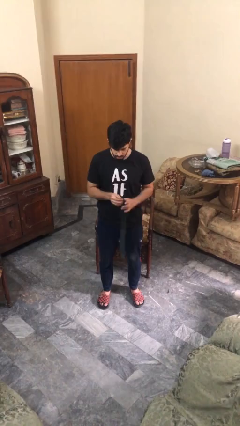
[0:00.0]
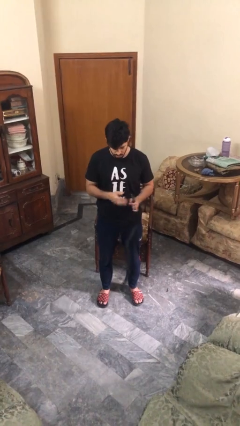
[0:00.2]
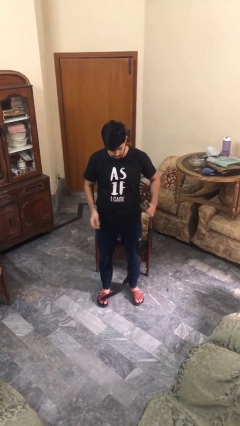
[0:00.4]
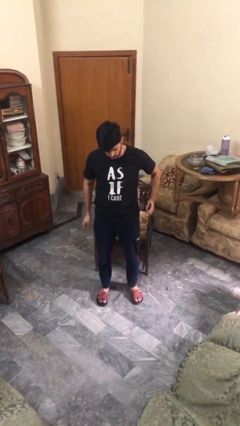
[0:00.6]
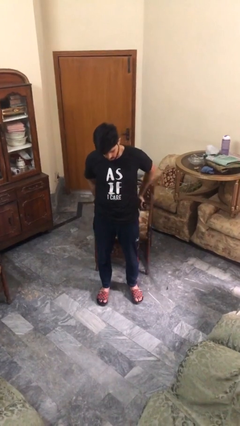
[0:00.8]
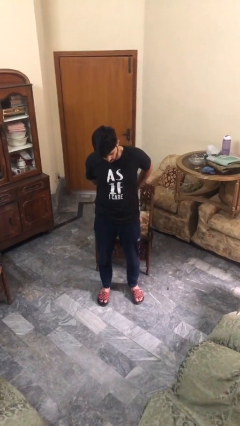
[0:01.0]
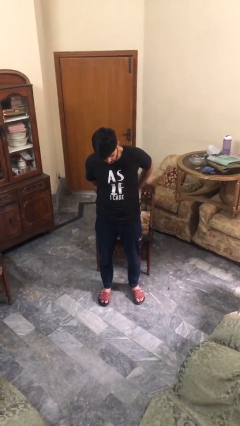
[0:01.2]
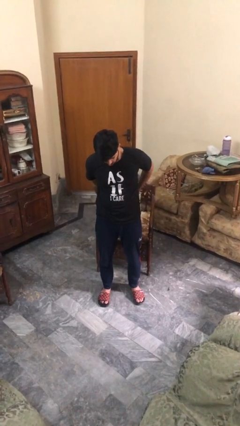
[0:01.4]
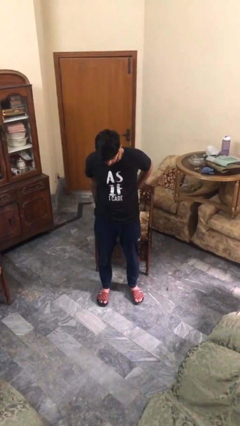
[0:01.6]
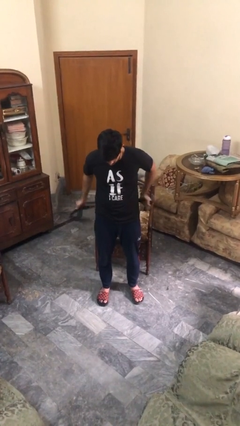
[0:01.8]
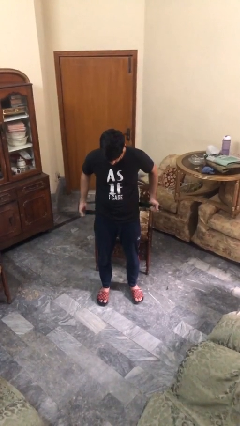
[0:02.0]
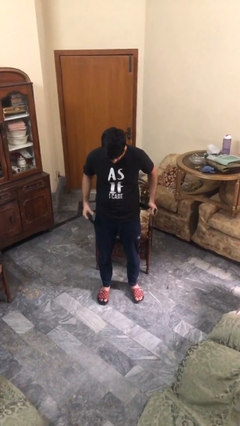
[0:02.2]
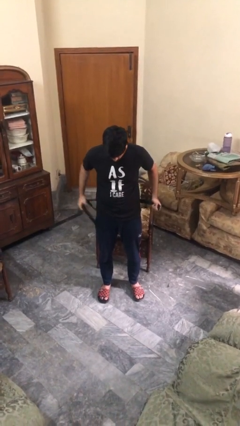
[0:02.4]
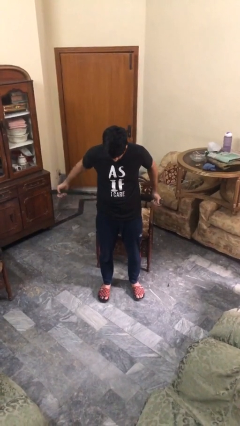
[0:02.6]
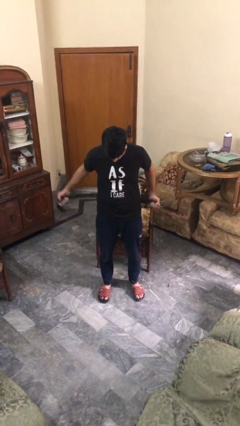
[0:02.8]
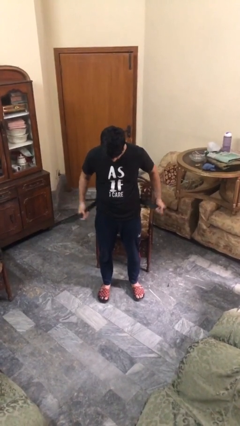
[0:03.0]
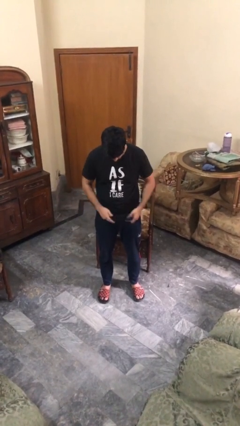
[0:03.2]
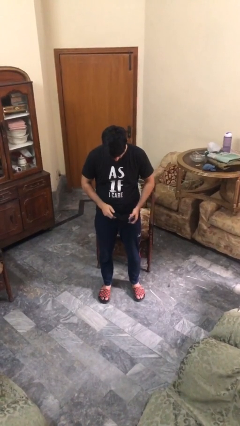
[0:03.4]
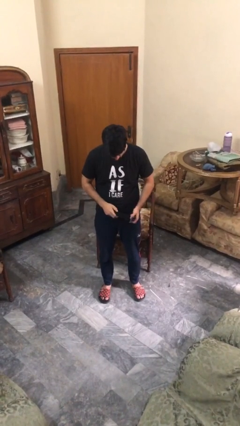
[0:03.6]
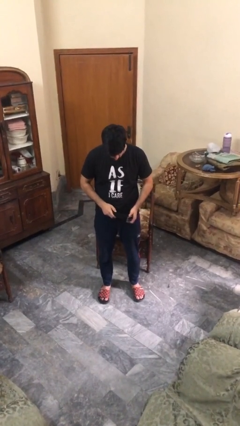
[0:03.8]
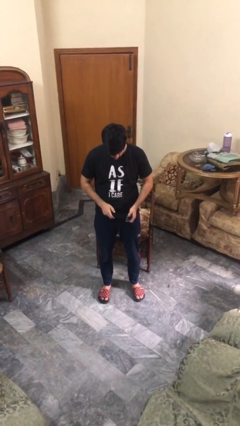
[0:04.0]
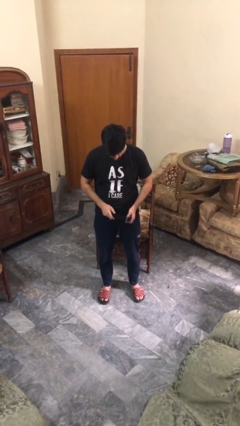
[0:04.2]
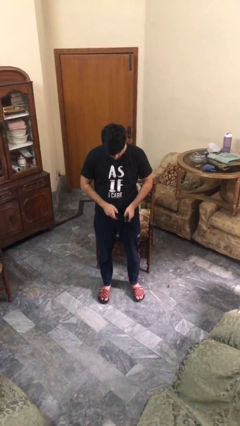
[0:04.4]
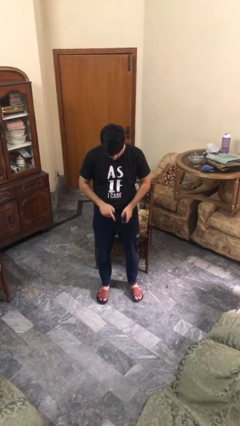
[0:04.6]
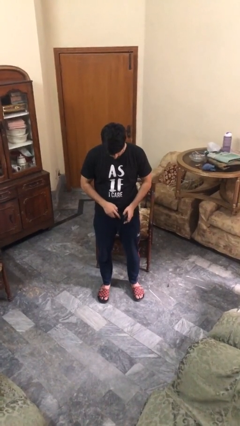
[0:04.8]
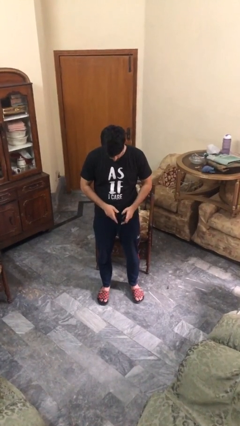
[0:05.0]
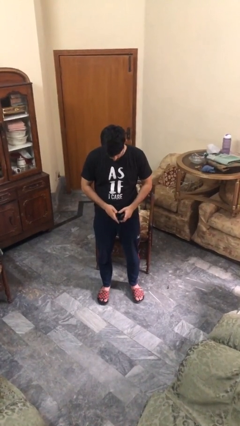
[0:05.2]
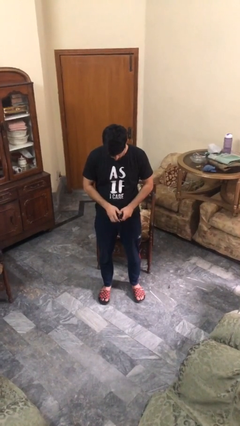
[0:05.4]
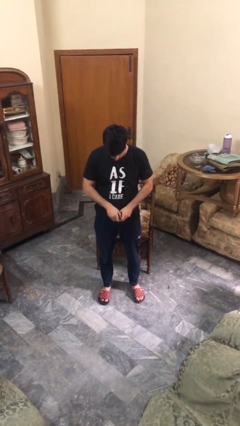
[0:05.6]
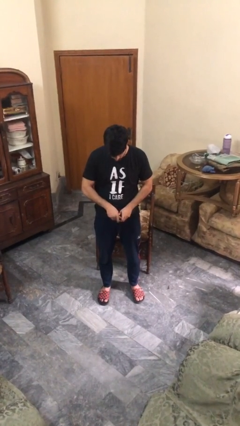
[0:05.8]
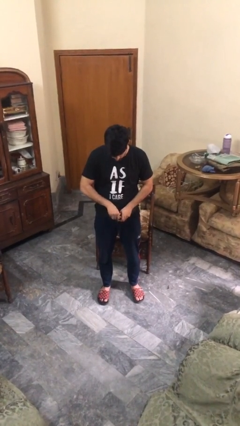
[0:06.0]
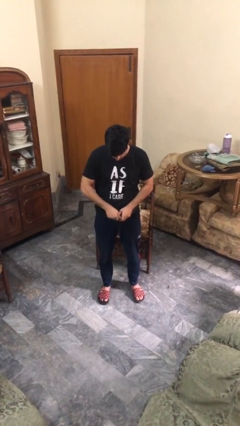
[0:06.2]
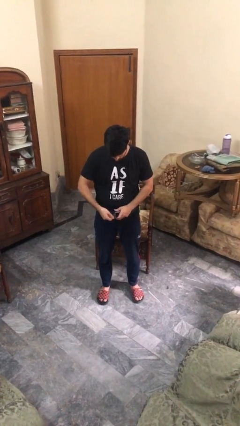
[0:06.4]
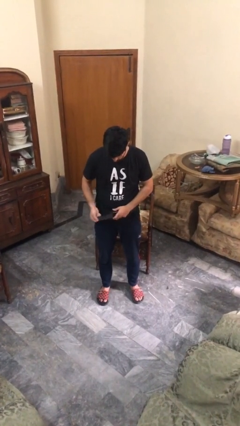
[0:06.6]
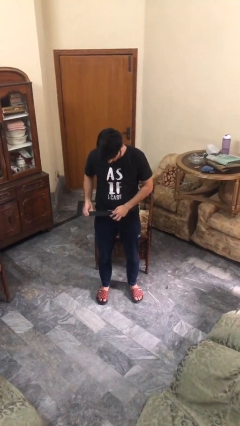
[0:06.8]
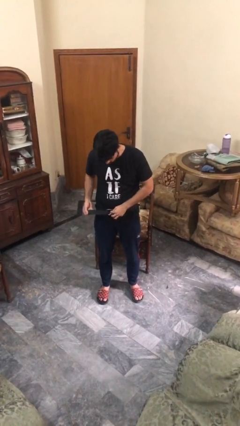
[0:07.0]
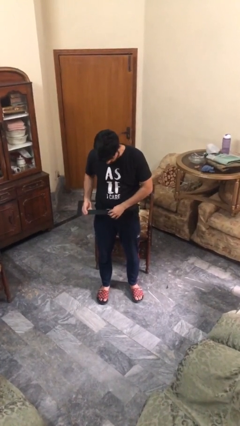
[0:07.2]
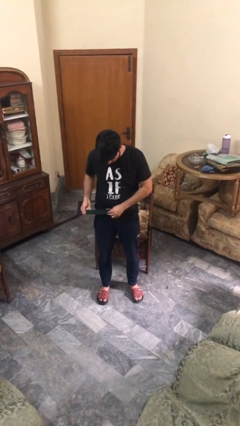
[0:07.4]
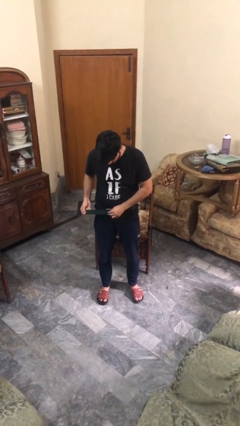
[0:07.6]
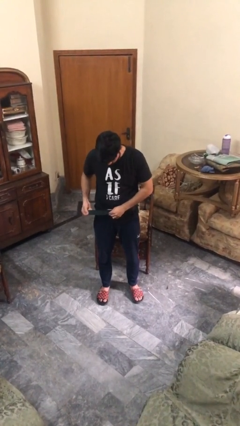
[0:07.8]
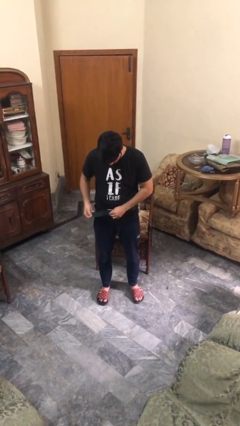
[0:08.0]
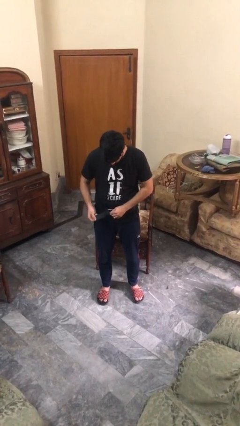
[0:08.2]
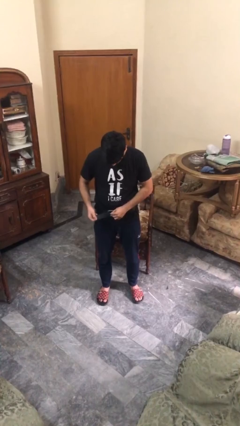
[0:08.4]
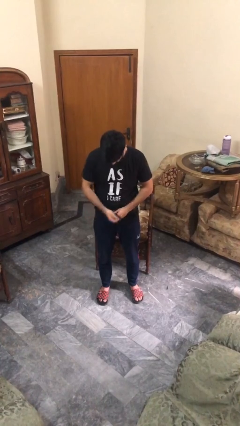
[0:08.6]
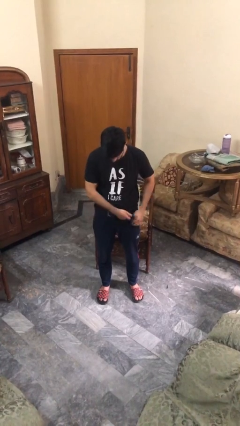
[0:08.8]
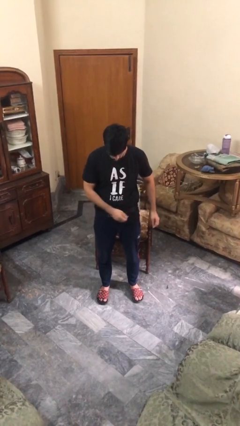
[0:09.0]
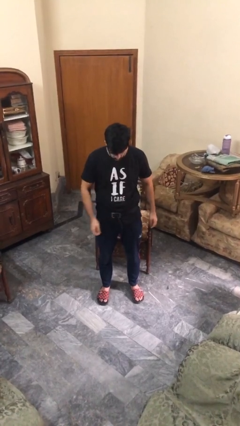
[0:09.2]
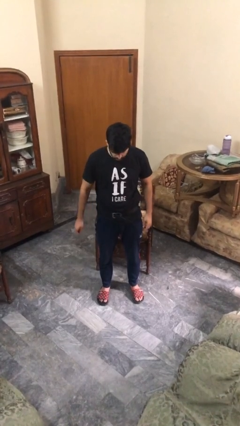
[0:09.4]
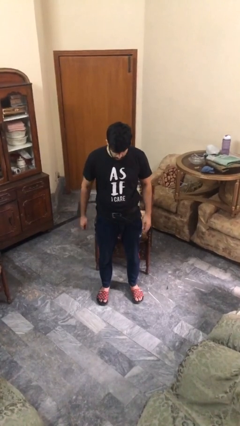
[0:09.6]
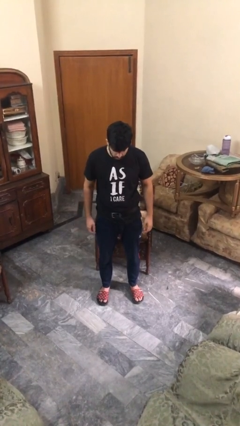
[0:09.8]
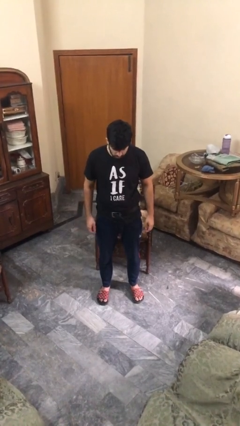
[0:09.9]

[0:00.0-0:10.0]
person puts on belt

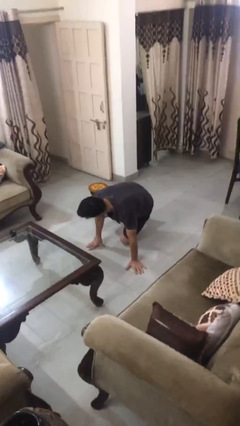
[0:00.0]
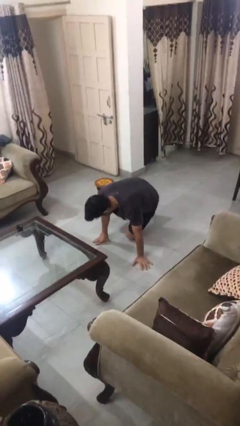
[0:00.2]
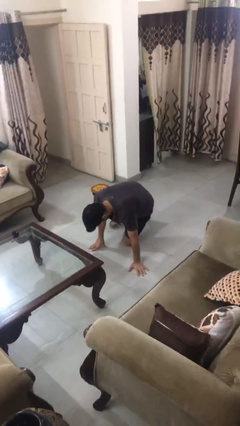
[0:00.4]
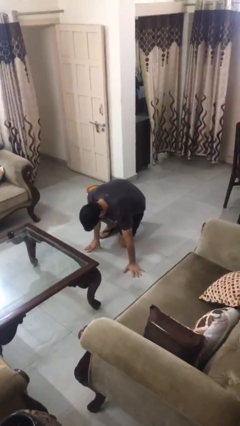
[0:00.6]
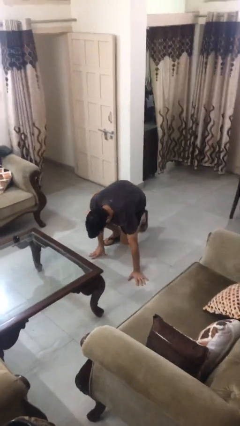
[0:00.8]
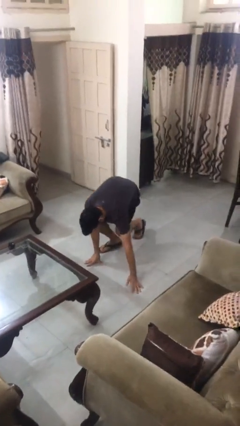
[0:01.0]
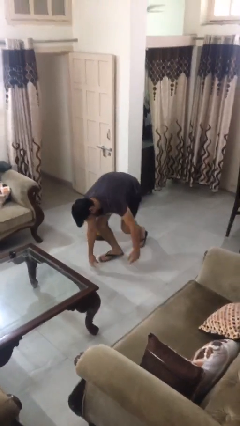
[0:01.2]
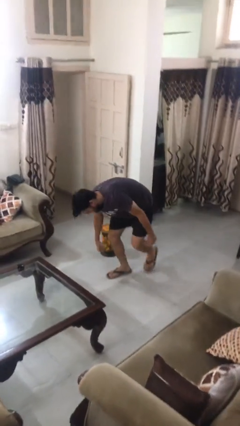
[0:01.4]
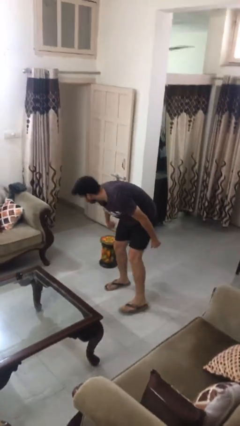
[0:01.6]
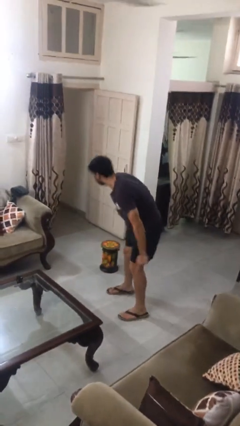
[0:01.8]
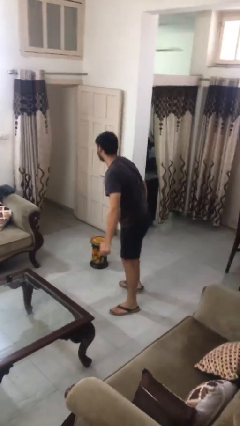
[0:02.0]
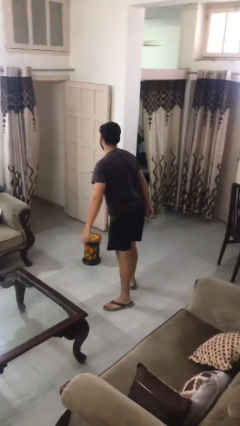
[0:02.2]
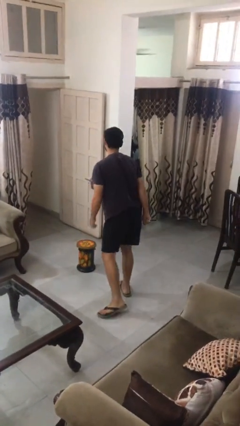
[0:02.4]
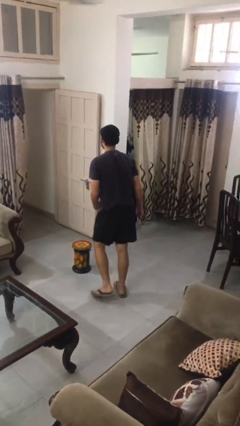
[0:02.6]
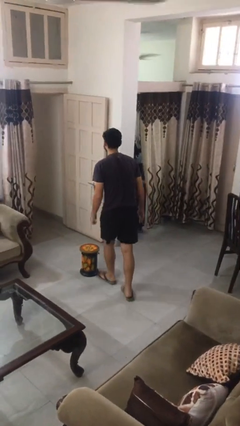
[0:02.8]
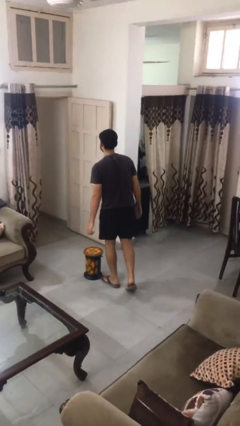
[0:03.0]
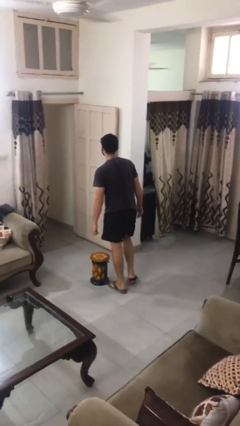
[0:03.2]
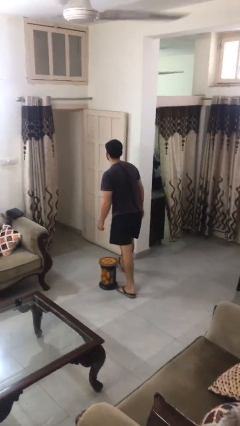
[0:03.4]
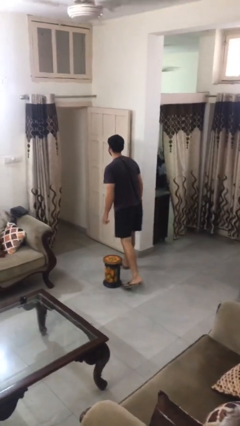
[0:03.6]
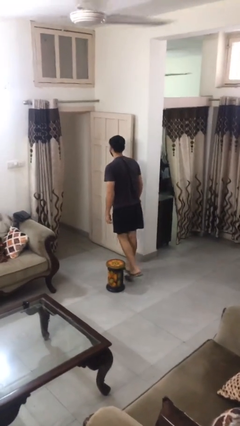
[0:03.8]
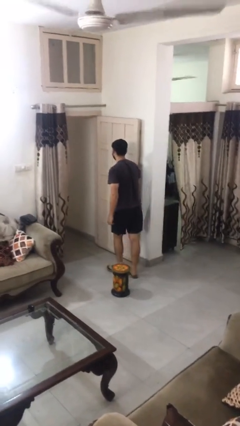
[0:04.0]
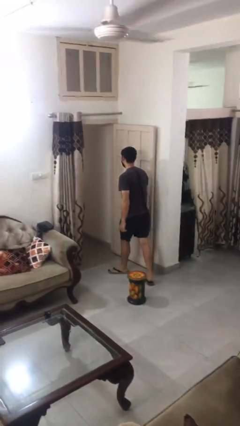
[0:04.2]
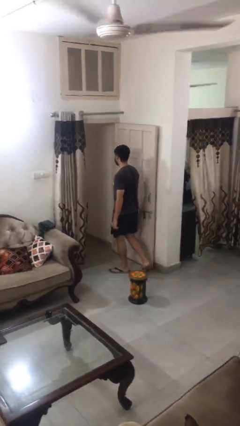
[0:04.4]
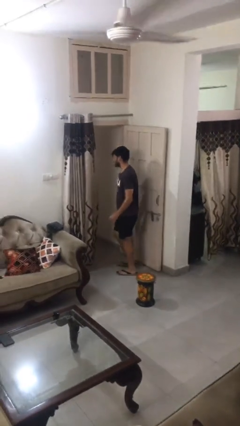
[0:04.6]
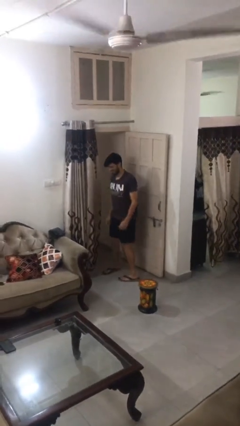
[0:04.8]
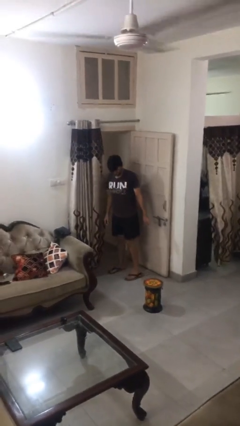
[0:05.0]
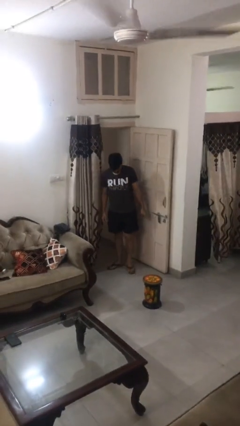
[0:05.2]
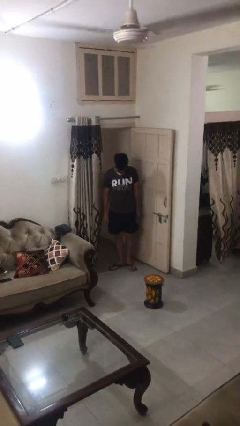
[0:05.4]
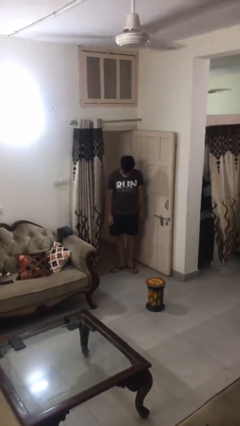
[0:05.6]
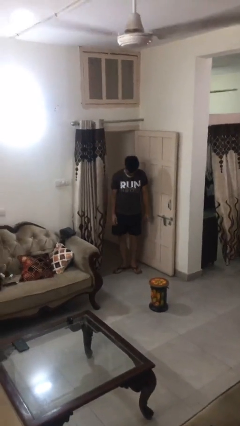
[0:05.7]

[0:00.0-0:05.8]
person stands up from floor

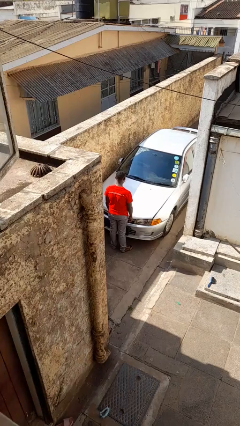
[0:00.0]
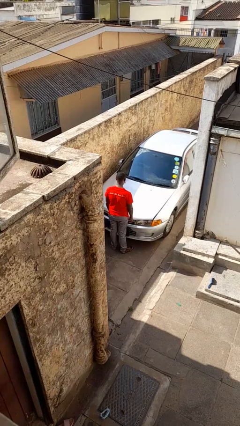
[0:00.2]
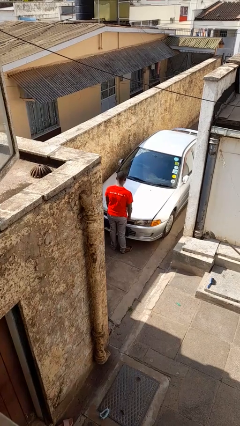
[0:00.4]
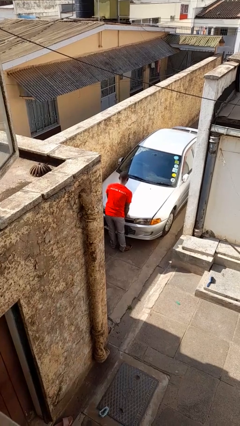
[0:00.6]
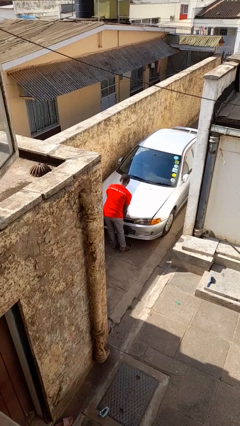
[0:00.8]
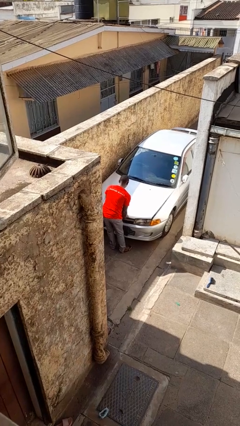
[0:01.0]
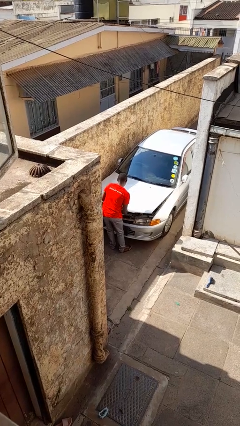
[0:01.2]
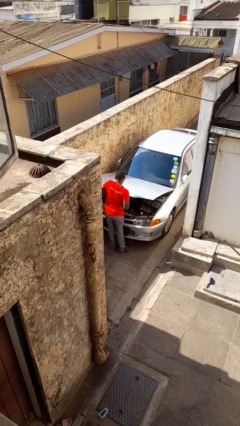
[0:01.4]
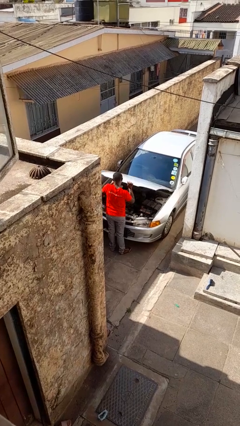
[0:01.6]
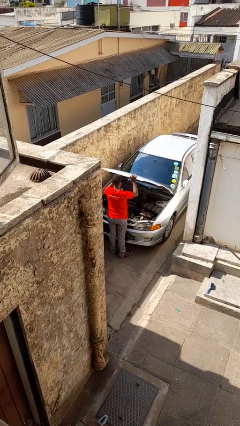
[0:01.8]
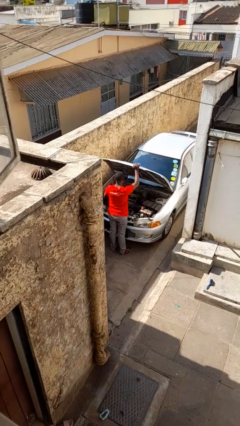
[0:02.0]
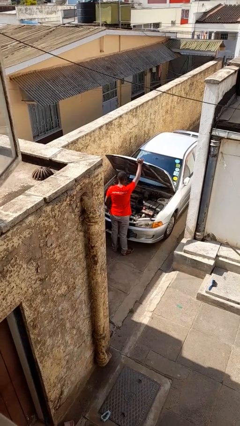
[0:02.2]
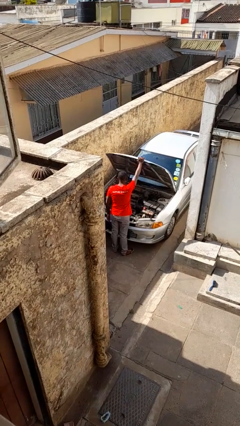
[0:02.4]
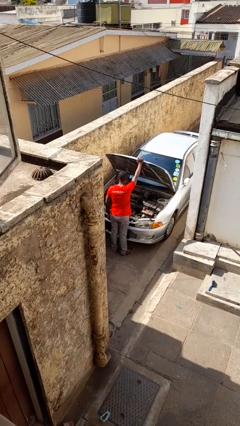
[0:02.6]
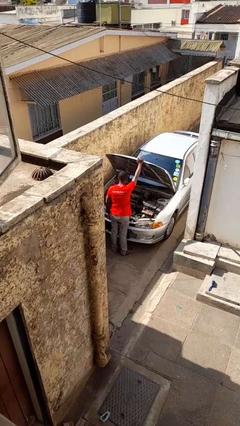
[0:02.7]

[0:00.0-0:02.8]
person opens car hood
